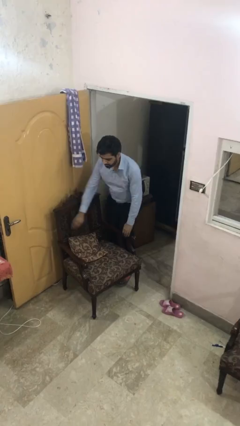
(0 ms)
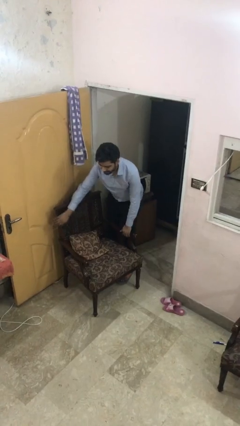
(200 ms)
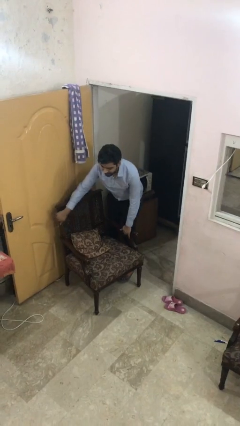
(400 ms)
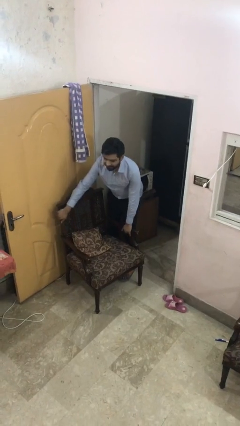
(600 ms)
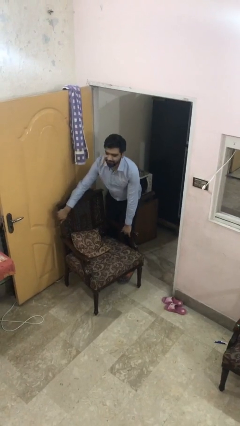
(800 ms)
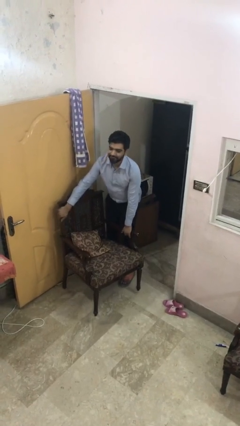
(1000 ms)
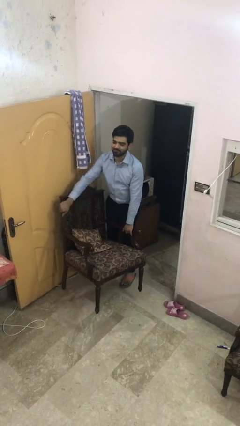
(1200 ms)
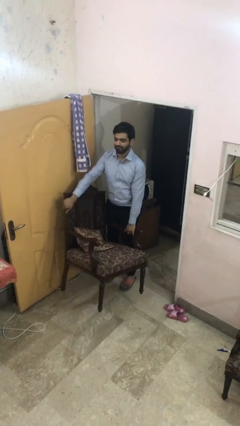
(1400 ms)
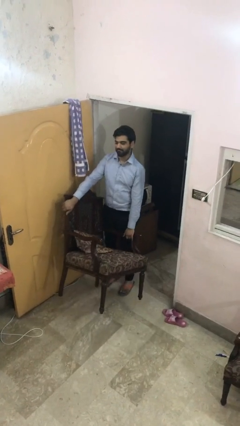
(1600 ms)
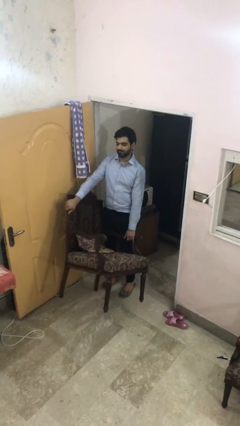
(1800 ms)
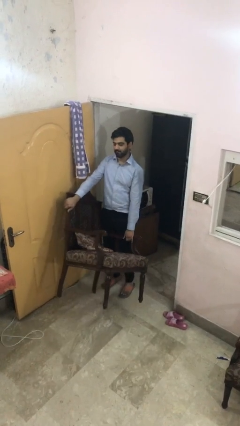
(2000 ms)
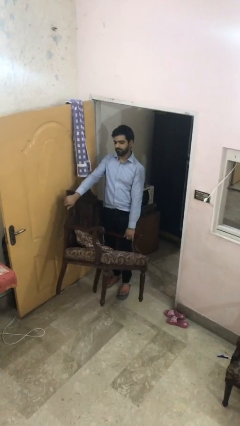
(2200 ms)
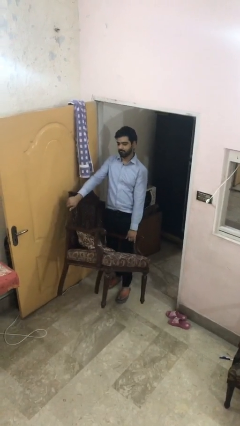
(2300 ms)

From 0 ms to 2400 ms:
person picks up object from floor

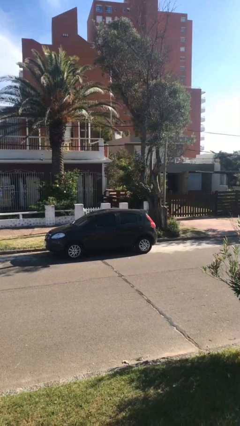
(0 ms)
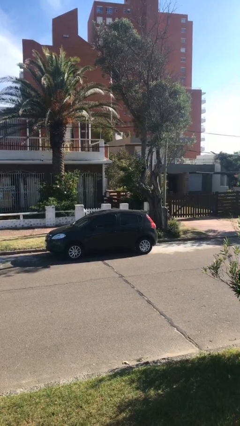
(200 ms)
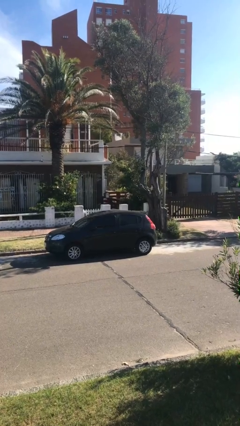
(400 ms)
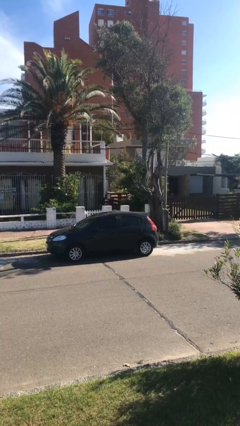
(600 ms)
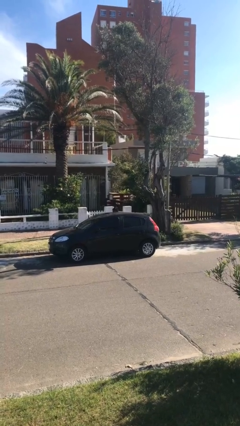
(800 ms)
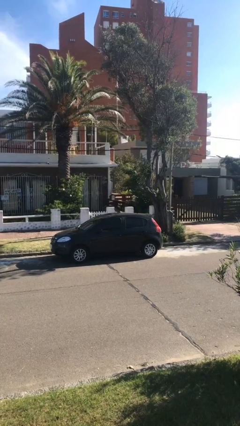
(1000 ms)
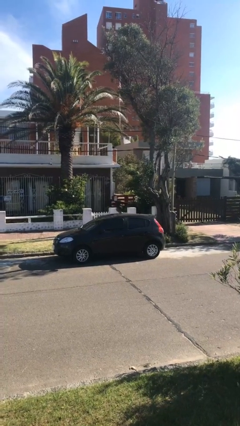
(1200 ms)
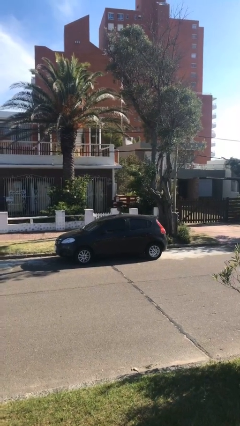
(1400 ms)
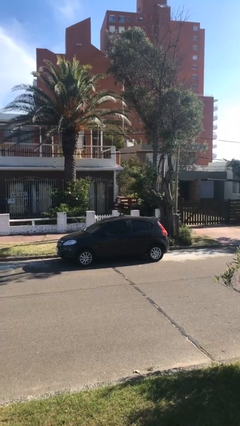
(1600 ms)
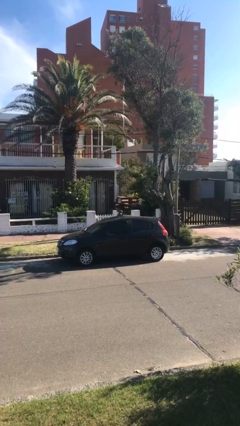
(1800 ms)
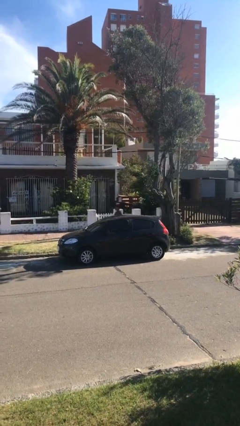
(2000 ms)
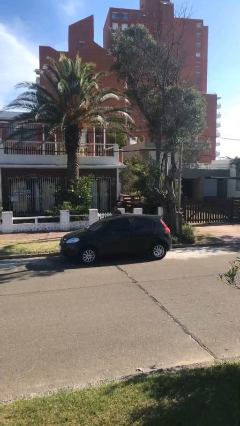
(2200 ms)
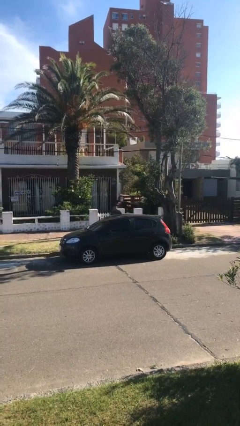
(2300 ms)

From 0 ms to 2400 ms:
person exits car

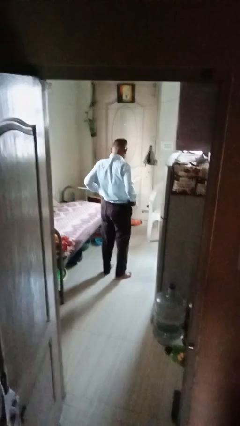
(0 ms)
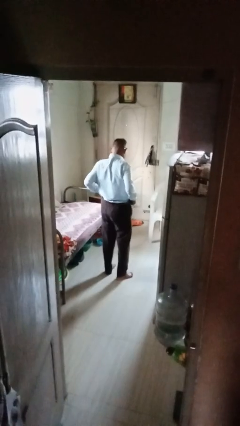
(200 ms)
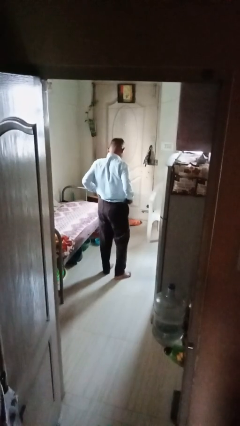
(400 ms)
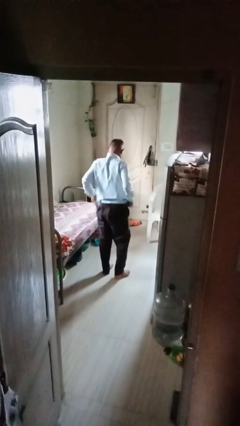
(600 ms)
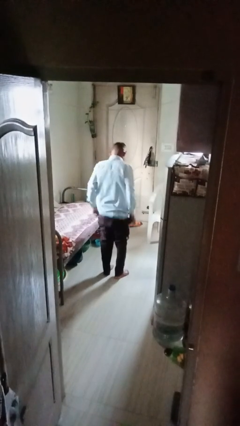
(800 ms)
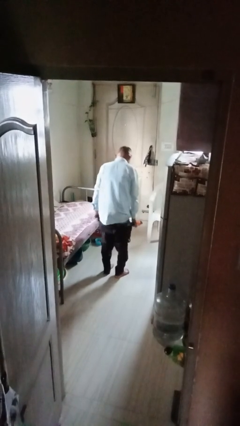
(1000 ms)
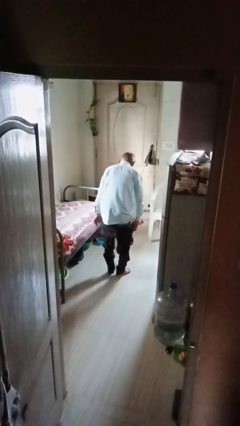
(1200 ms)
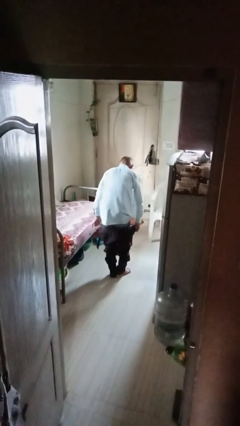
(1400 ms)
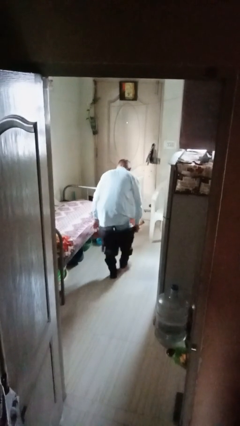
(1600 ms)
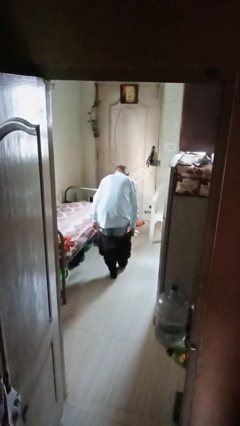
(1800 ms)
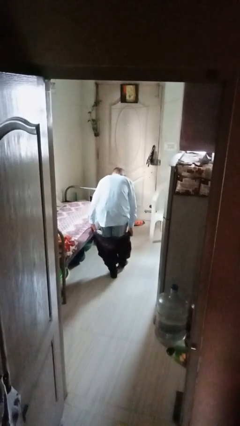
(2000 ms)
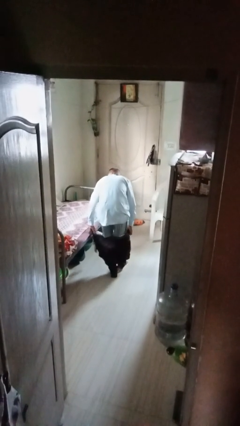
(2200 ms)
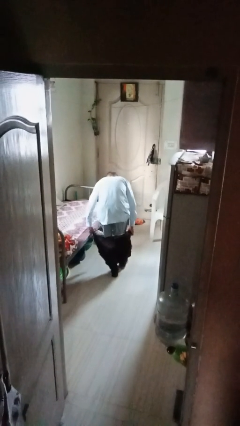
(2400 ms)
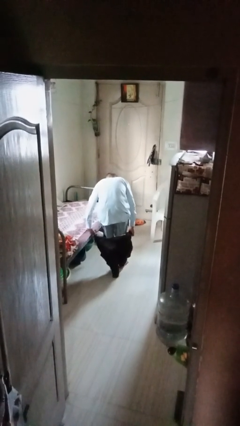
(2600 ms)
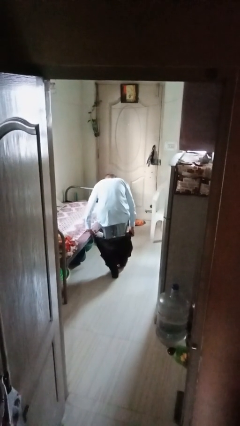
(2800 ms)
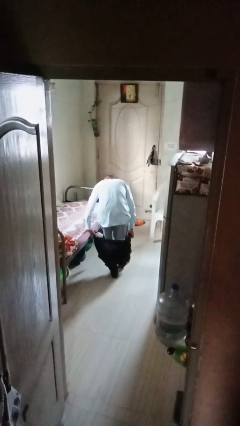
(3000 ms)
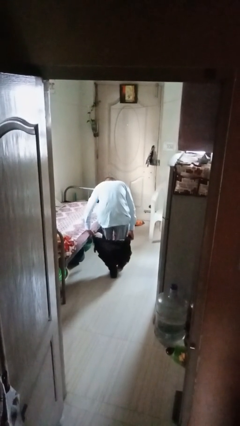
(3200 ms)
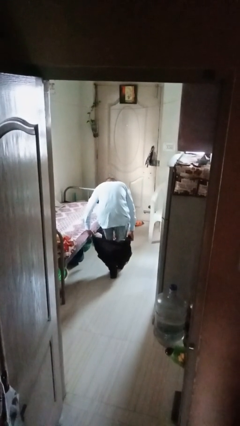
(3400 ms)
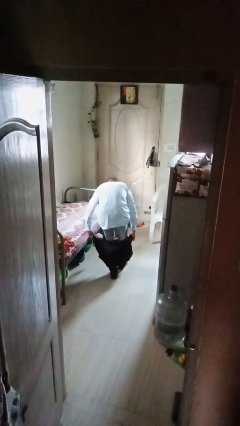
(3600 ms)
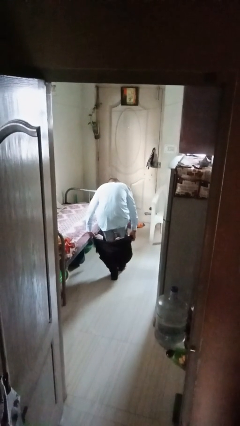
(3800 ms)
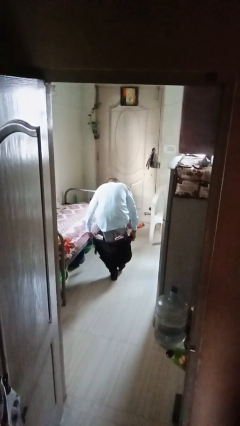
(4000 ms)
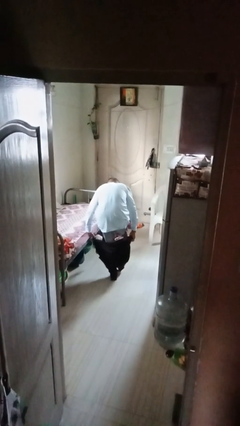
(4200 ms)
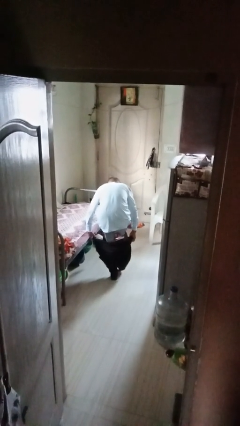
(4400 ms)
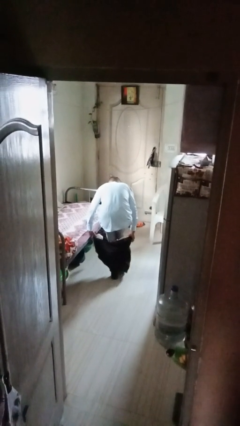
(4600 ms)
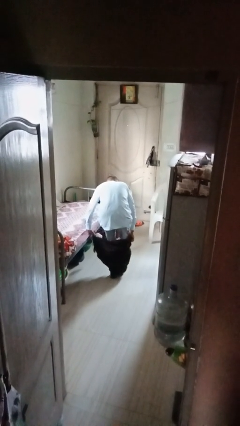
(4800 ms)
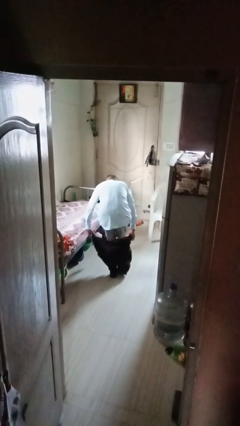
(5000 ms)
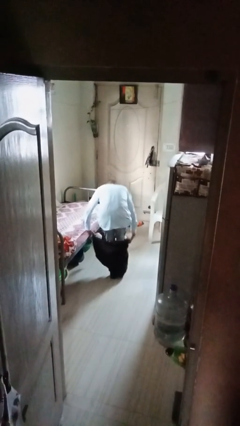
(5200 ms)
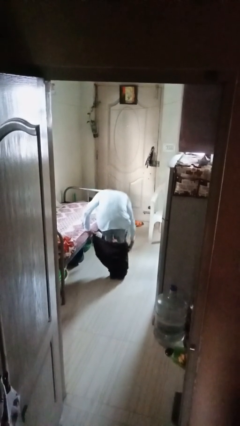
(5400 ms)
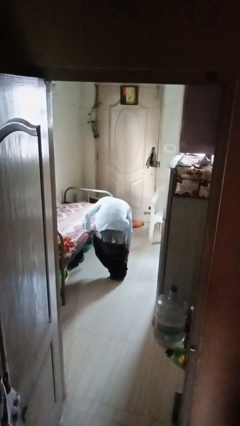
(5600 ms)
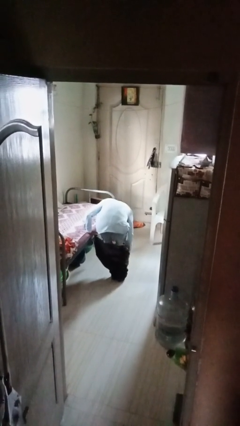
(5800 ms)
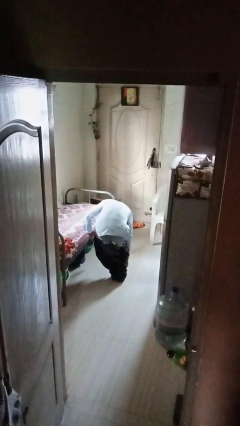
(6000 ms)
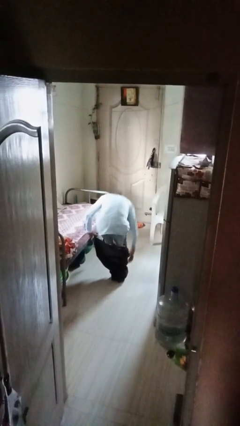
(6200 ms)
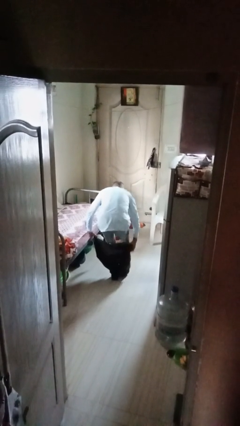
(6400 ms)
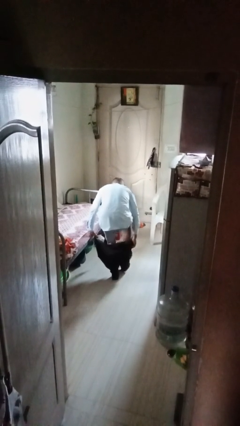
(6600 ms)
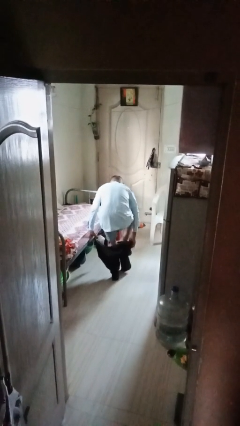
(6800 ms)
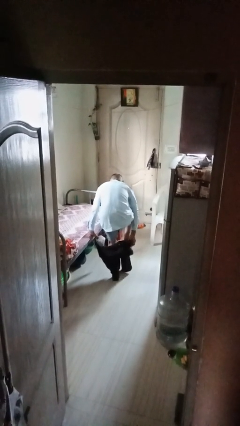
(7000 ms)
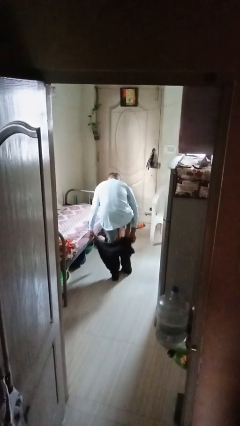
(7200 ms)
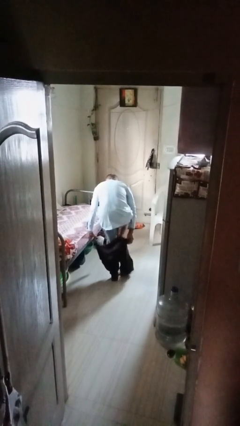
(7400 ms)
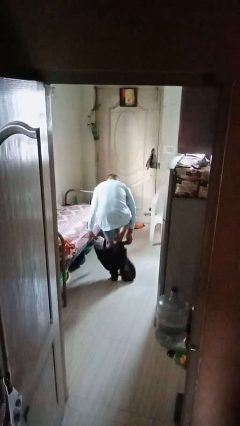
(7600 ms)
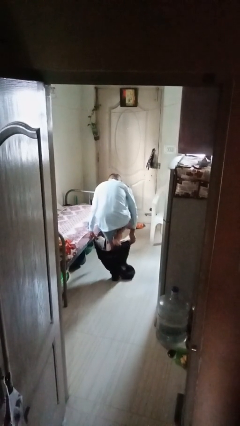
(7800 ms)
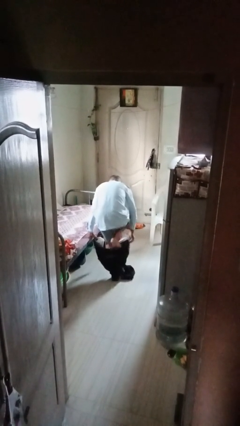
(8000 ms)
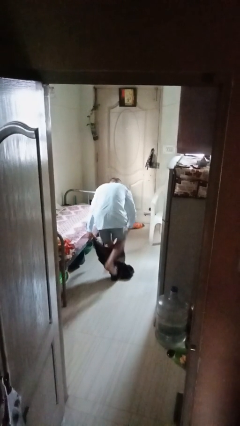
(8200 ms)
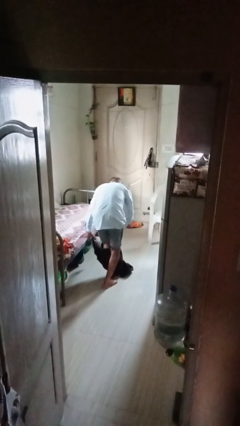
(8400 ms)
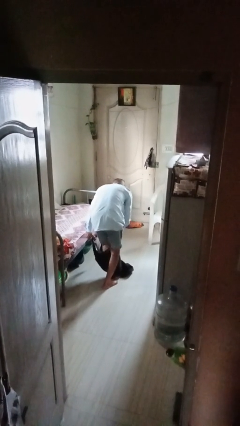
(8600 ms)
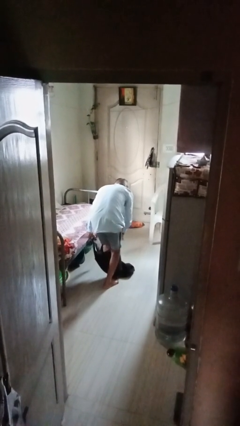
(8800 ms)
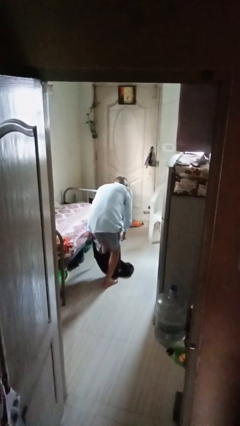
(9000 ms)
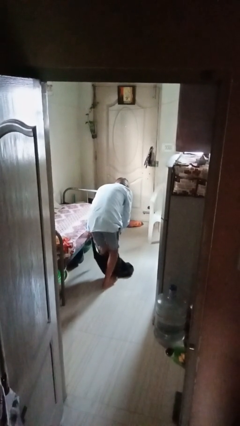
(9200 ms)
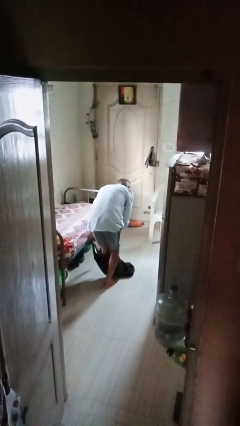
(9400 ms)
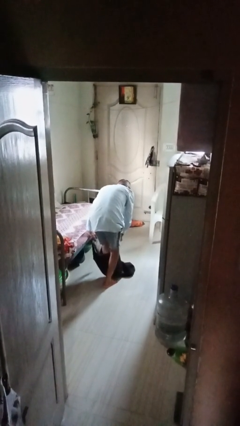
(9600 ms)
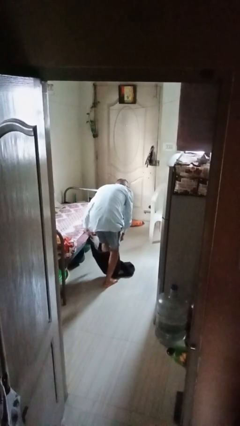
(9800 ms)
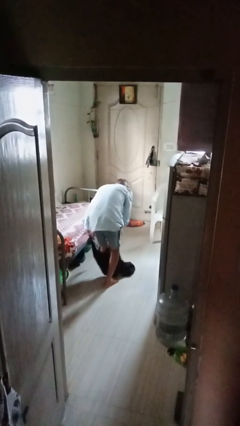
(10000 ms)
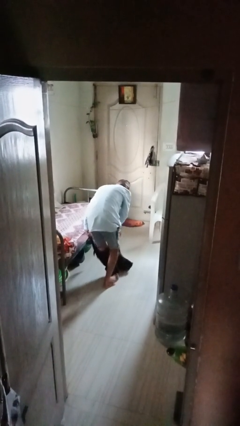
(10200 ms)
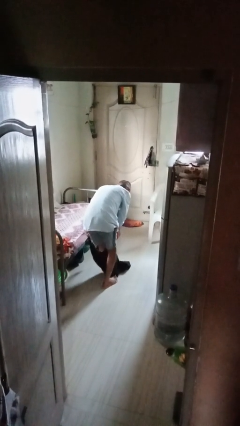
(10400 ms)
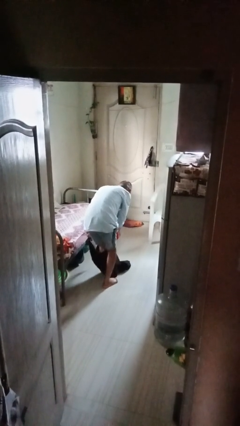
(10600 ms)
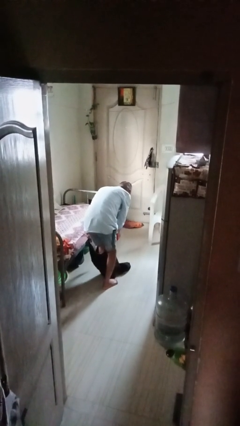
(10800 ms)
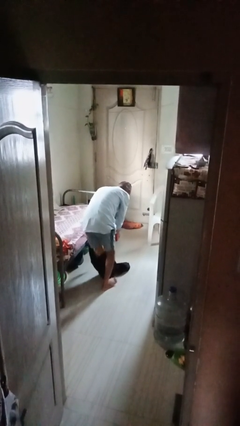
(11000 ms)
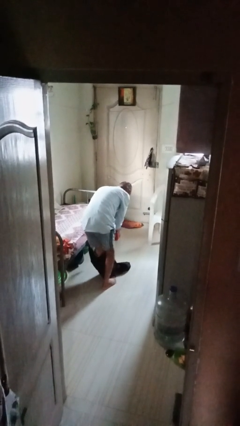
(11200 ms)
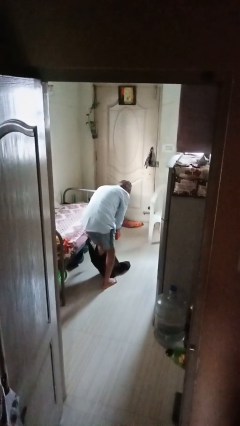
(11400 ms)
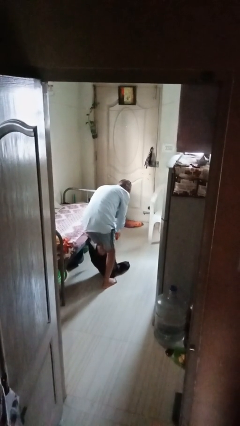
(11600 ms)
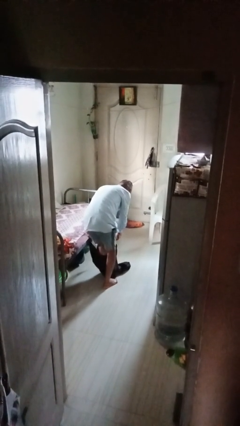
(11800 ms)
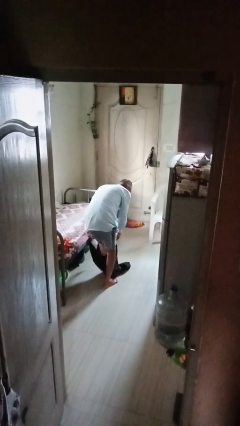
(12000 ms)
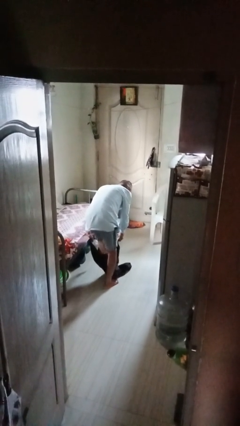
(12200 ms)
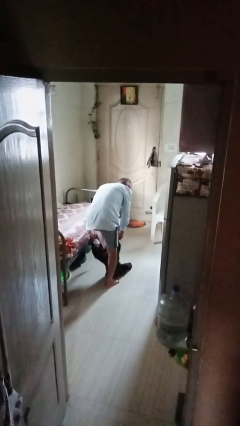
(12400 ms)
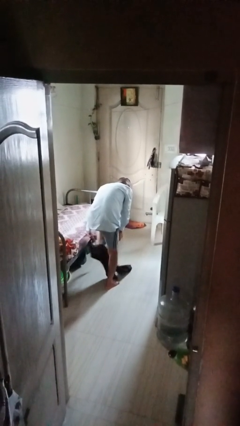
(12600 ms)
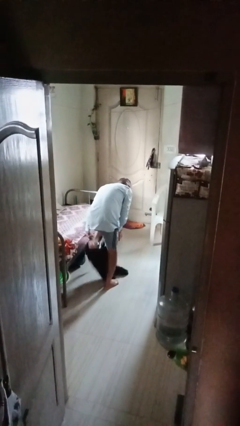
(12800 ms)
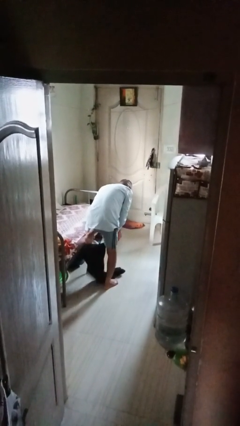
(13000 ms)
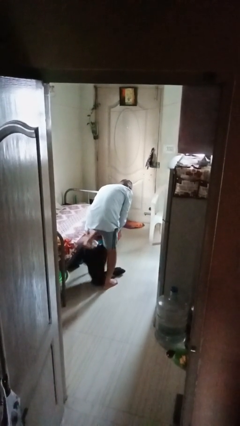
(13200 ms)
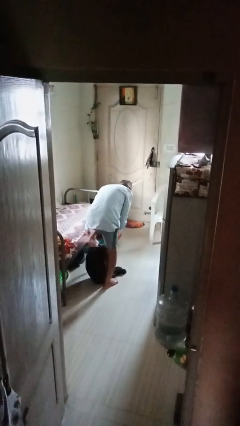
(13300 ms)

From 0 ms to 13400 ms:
person takes off pants
